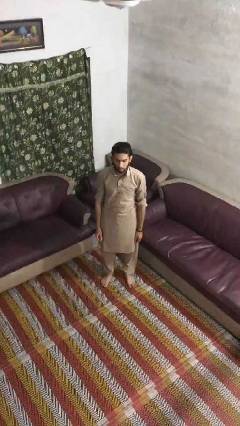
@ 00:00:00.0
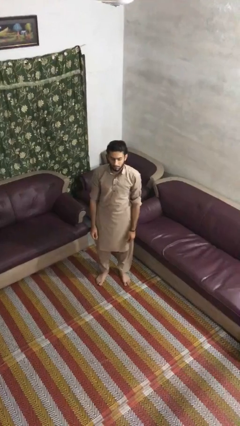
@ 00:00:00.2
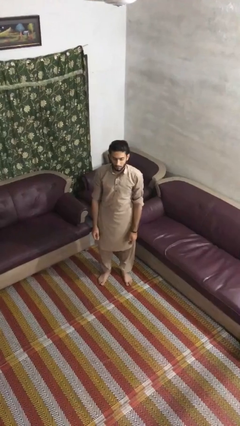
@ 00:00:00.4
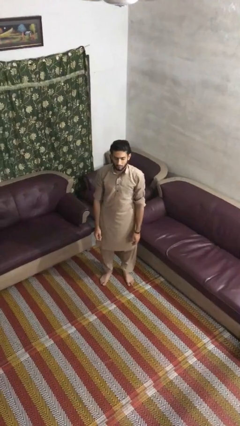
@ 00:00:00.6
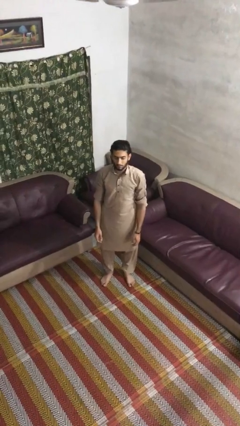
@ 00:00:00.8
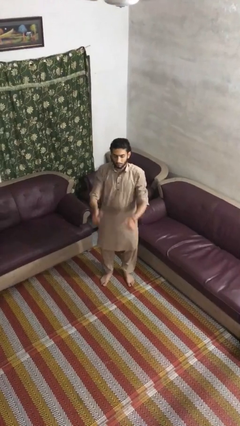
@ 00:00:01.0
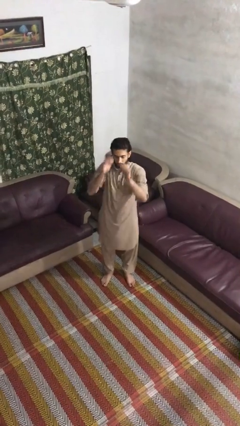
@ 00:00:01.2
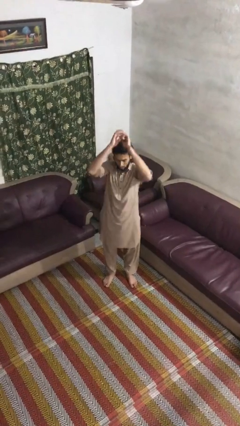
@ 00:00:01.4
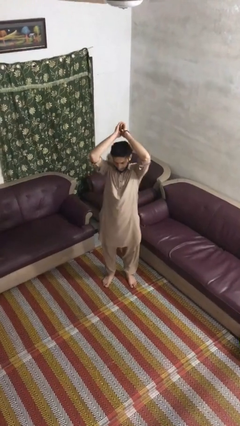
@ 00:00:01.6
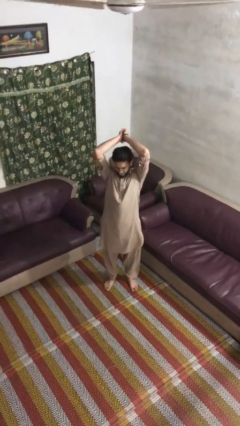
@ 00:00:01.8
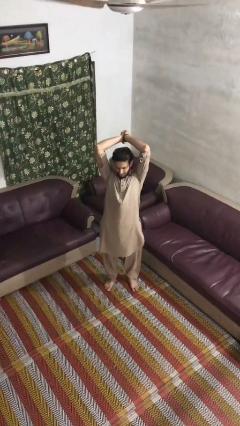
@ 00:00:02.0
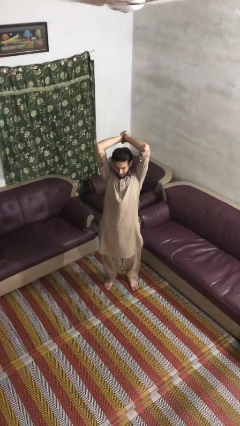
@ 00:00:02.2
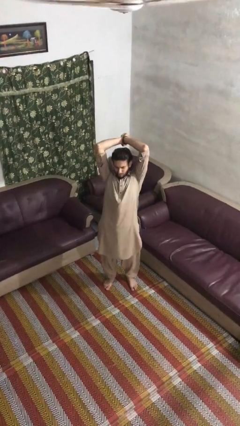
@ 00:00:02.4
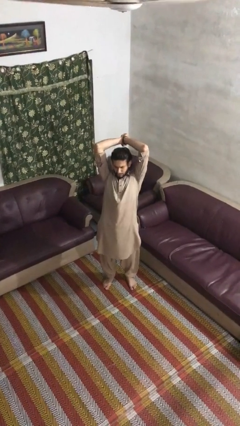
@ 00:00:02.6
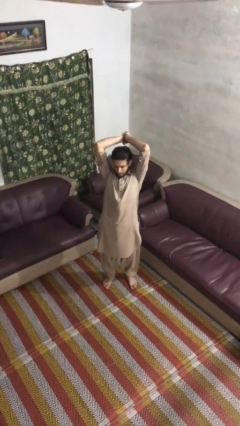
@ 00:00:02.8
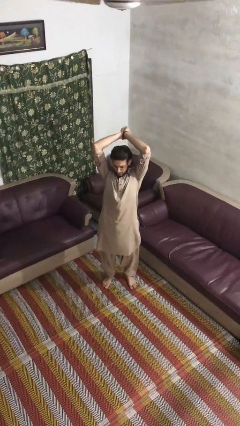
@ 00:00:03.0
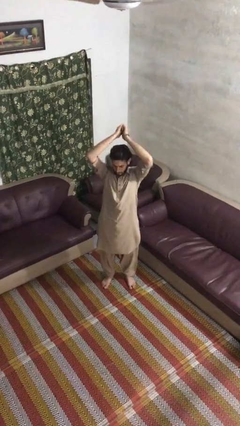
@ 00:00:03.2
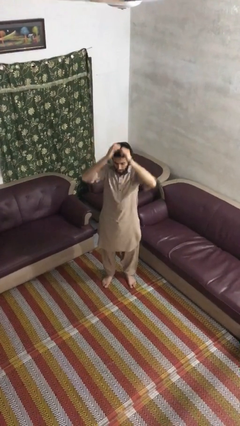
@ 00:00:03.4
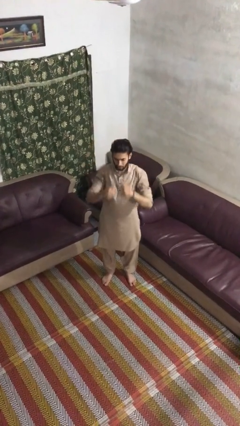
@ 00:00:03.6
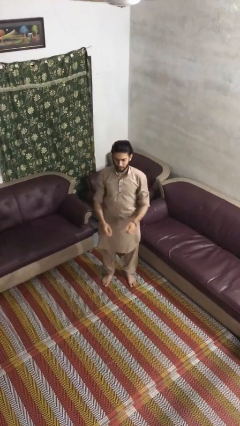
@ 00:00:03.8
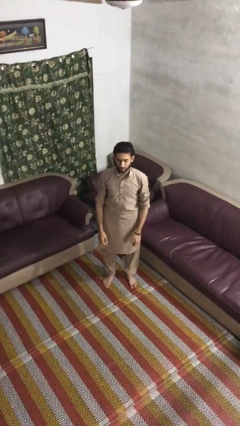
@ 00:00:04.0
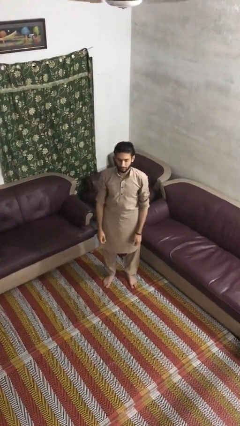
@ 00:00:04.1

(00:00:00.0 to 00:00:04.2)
person stretches arms over head

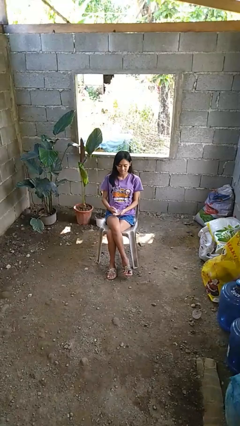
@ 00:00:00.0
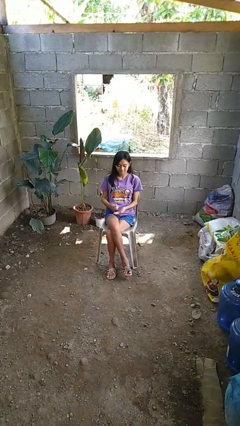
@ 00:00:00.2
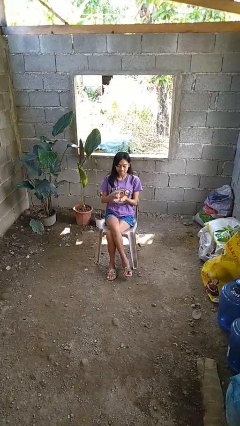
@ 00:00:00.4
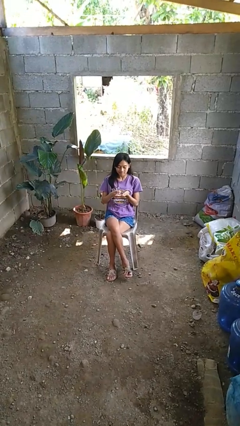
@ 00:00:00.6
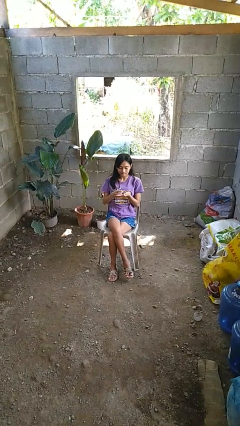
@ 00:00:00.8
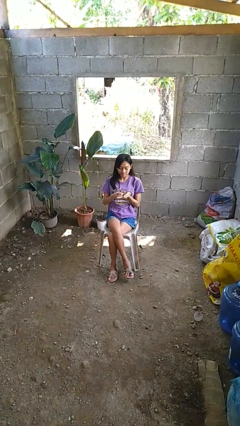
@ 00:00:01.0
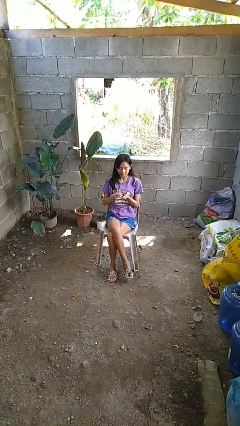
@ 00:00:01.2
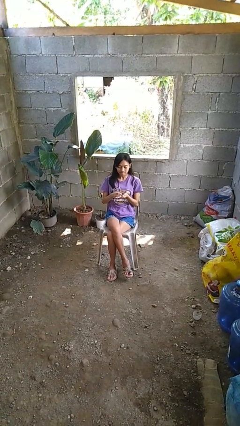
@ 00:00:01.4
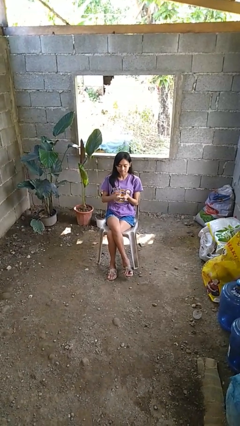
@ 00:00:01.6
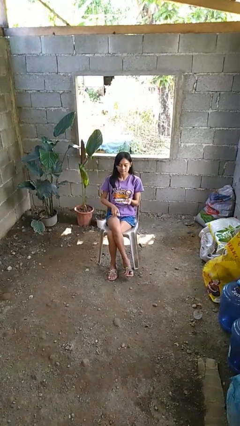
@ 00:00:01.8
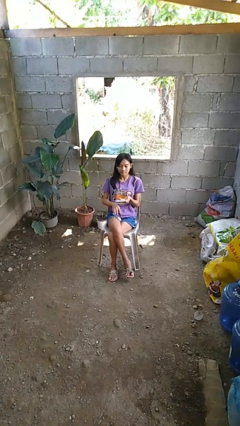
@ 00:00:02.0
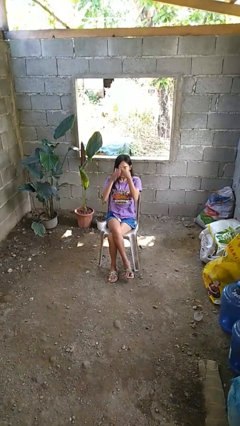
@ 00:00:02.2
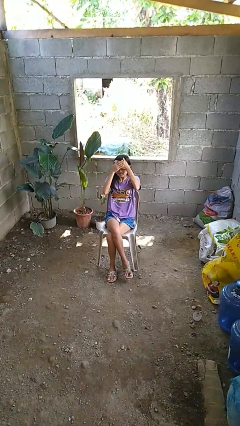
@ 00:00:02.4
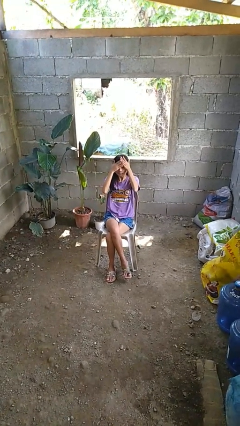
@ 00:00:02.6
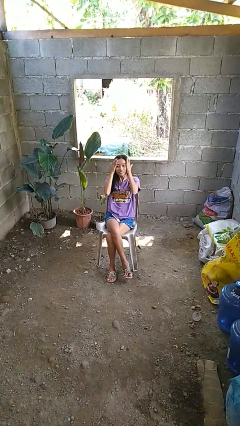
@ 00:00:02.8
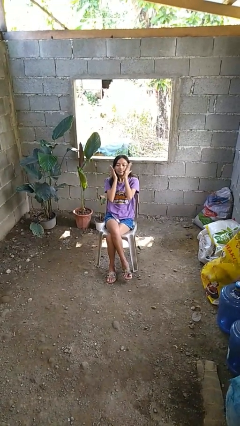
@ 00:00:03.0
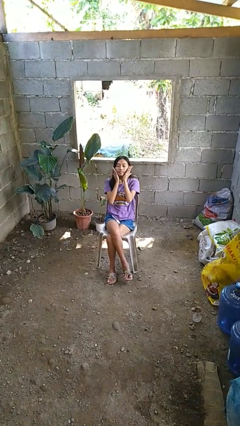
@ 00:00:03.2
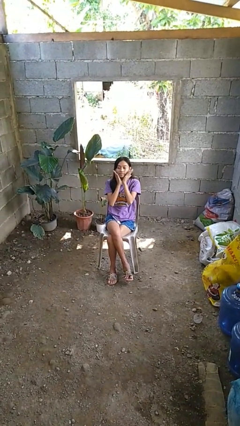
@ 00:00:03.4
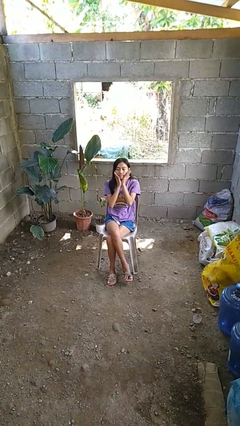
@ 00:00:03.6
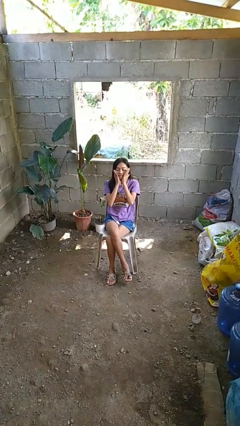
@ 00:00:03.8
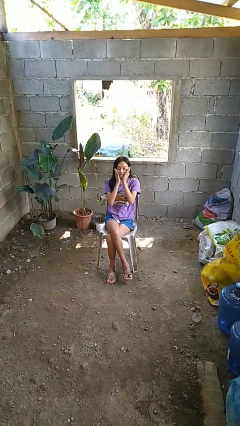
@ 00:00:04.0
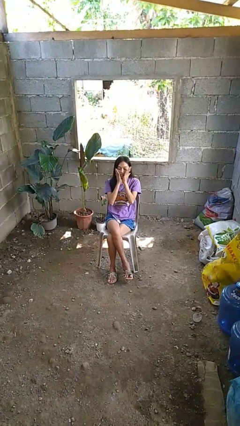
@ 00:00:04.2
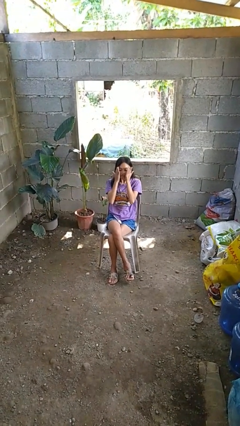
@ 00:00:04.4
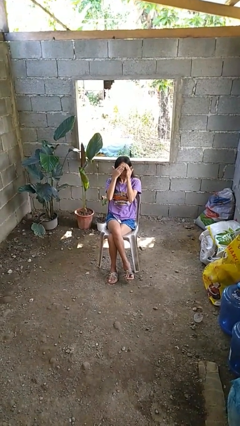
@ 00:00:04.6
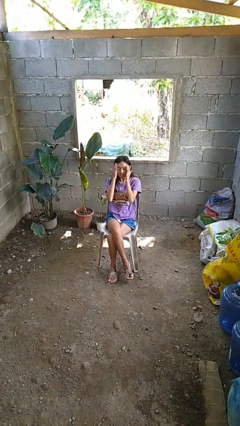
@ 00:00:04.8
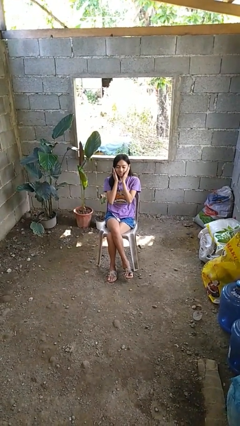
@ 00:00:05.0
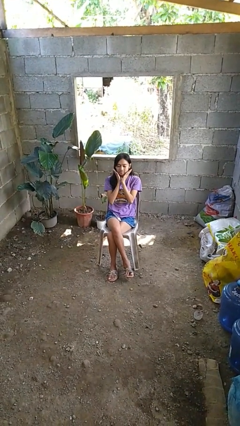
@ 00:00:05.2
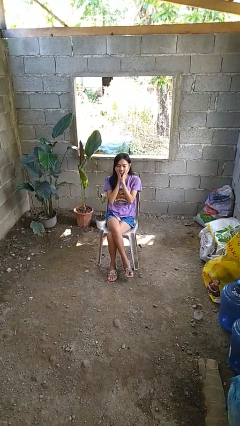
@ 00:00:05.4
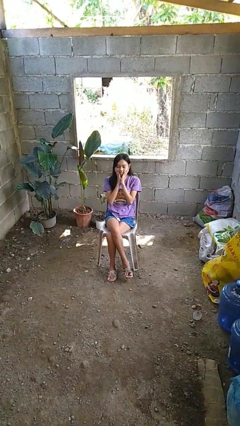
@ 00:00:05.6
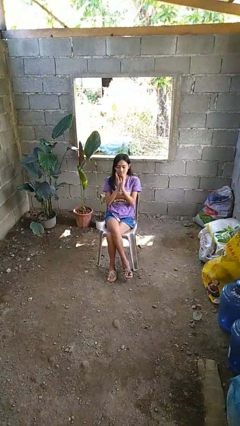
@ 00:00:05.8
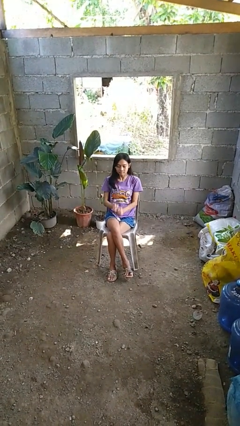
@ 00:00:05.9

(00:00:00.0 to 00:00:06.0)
person applies facial moisturizer

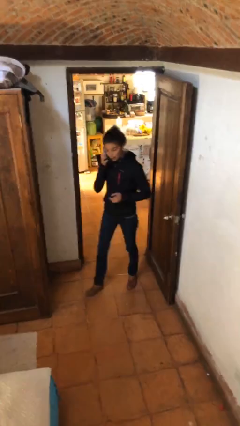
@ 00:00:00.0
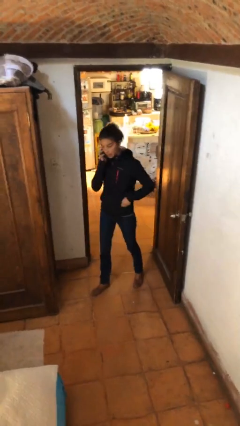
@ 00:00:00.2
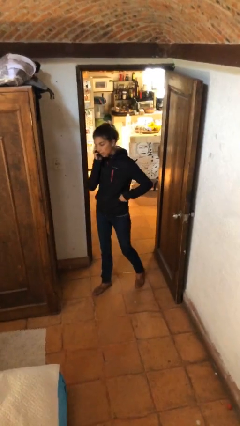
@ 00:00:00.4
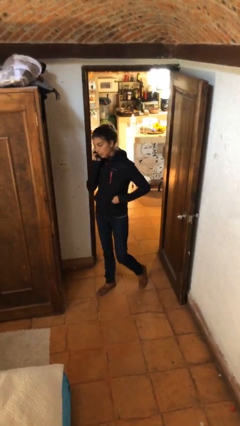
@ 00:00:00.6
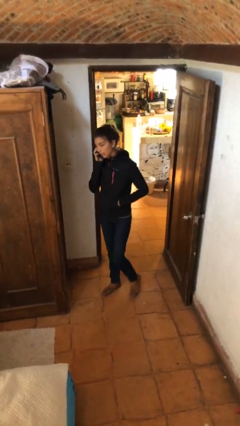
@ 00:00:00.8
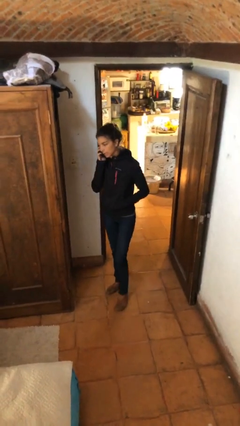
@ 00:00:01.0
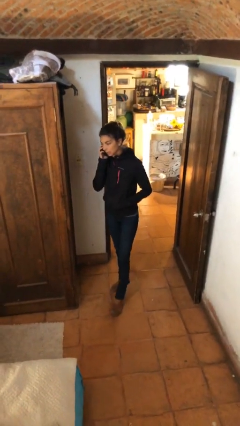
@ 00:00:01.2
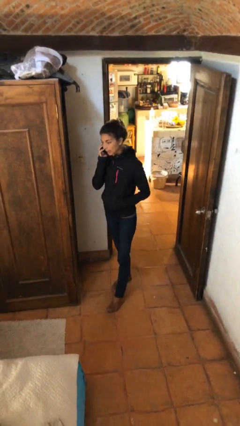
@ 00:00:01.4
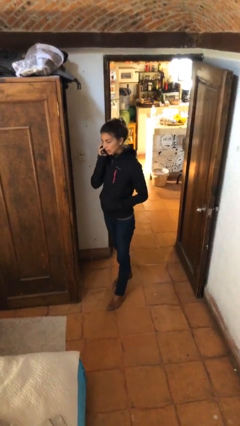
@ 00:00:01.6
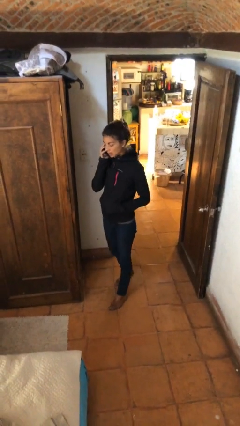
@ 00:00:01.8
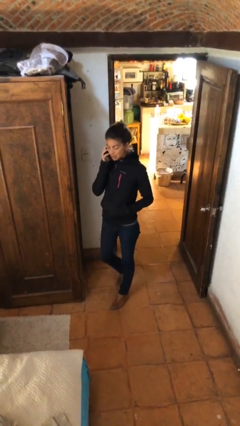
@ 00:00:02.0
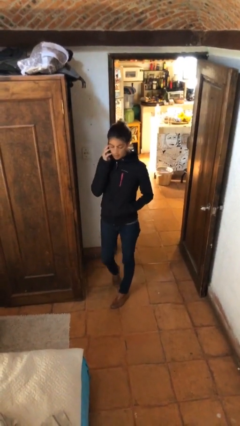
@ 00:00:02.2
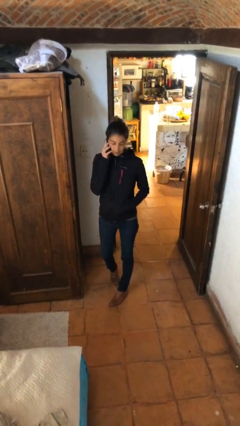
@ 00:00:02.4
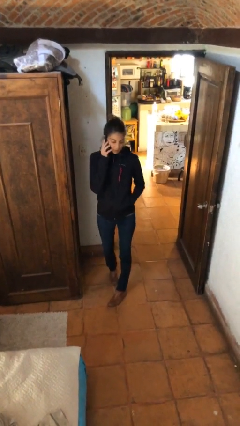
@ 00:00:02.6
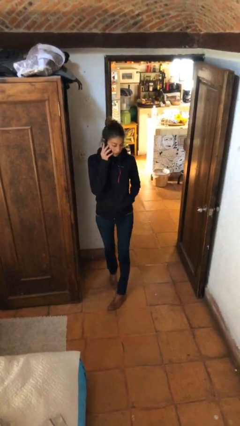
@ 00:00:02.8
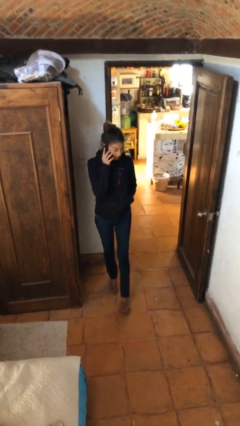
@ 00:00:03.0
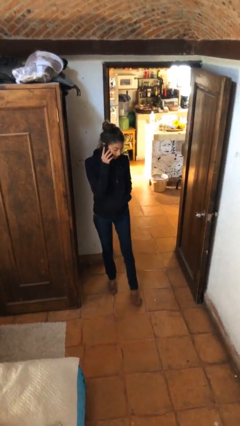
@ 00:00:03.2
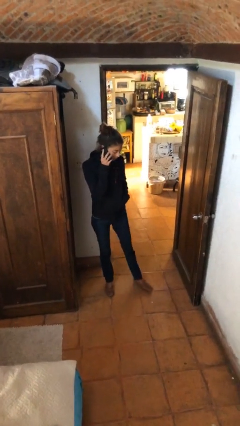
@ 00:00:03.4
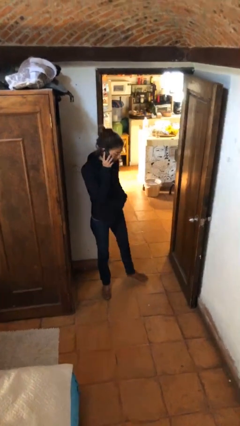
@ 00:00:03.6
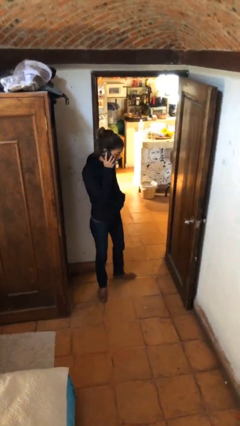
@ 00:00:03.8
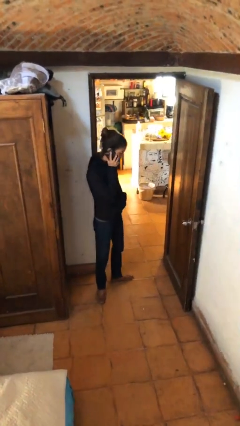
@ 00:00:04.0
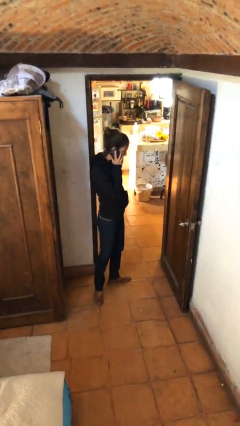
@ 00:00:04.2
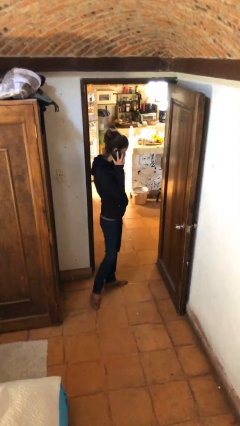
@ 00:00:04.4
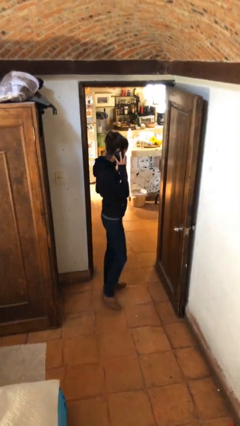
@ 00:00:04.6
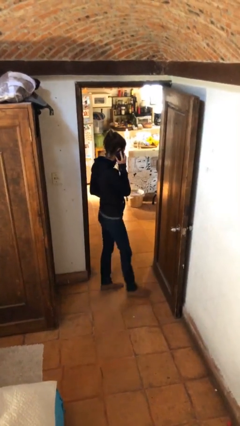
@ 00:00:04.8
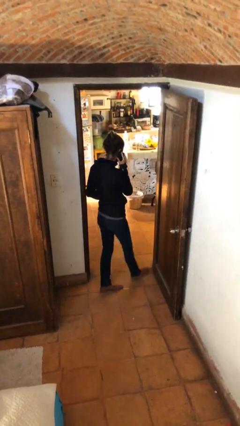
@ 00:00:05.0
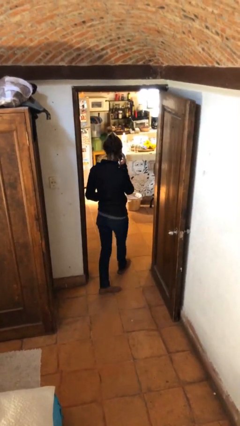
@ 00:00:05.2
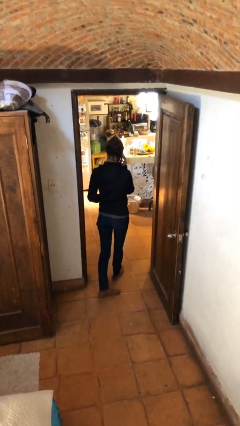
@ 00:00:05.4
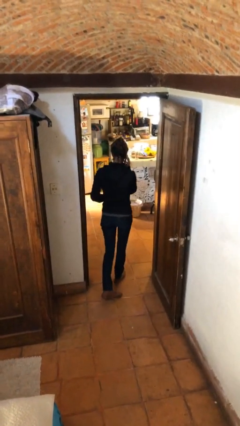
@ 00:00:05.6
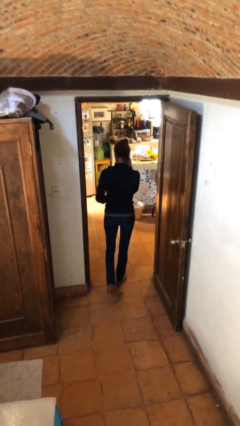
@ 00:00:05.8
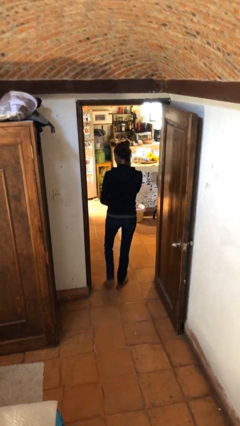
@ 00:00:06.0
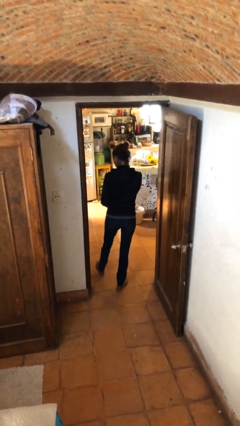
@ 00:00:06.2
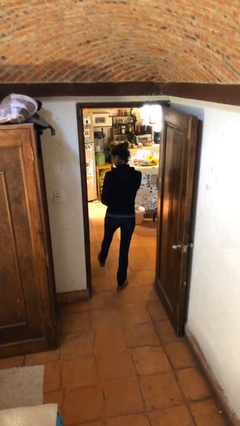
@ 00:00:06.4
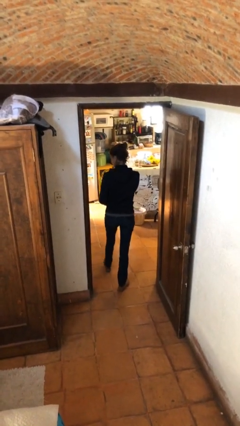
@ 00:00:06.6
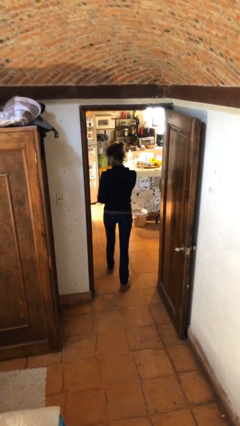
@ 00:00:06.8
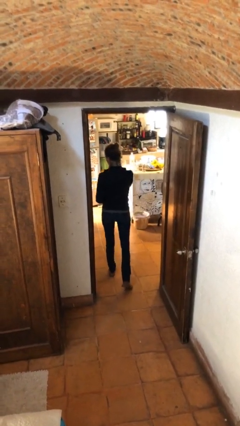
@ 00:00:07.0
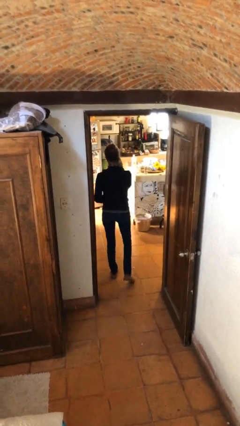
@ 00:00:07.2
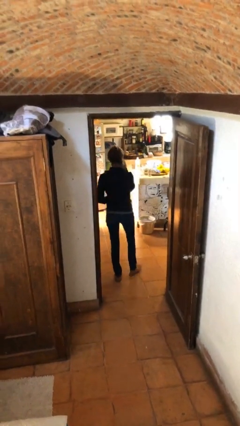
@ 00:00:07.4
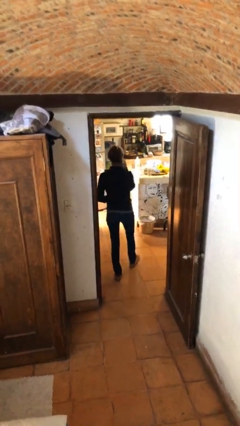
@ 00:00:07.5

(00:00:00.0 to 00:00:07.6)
person talks on phone
